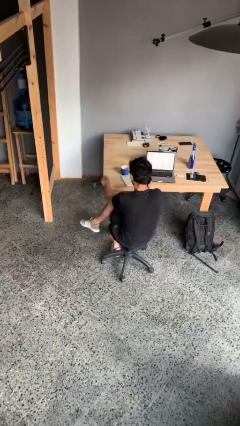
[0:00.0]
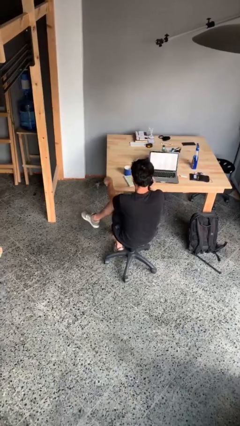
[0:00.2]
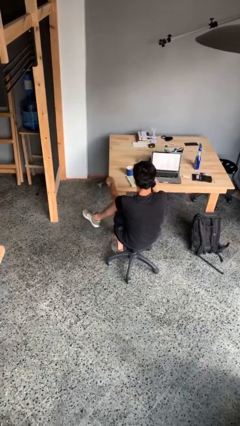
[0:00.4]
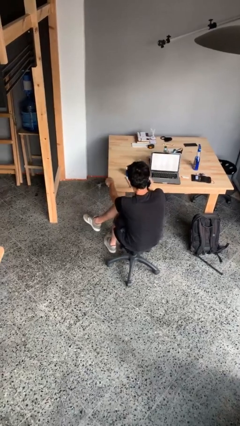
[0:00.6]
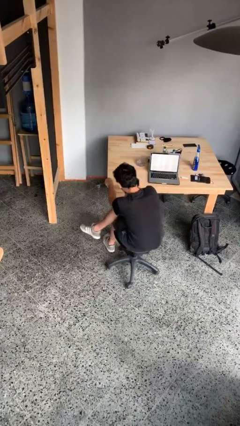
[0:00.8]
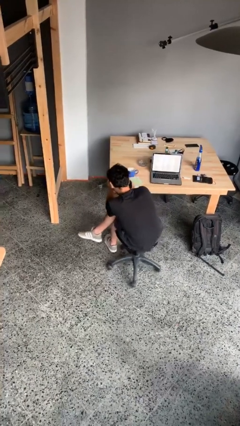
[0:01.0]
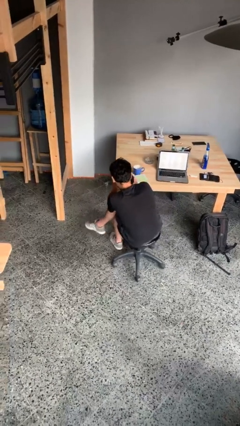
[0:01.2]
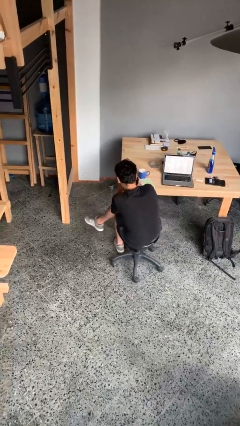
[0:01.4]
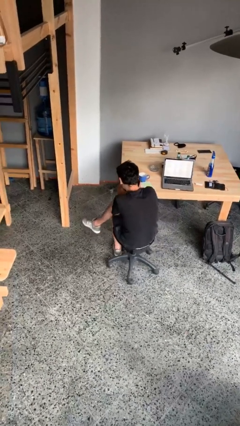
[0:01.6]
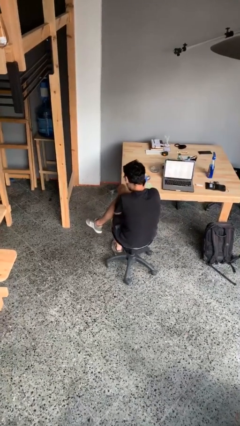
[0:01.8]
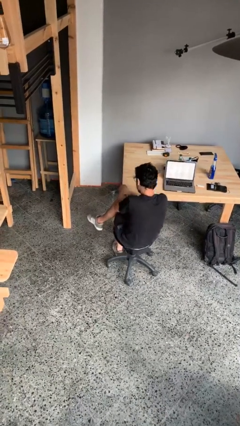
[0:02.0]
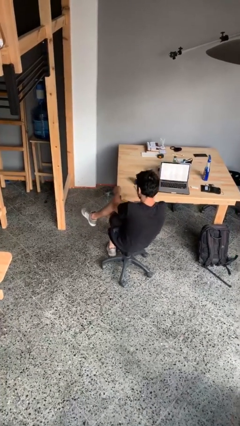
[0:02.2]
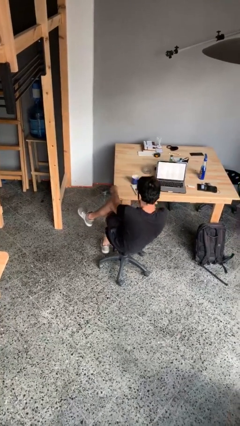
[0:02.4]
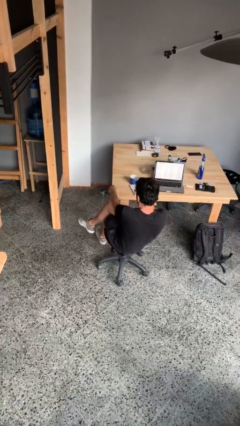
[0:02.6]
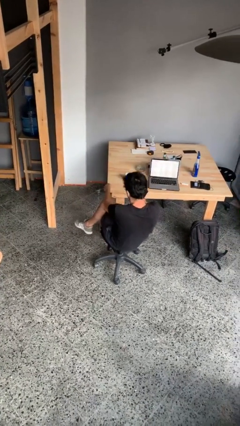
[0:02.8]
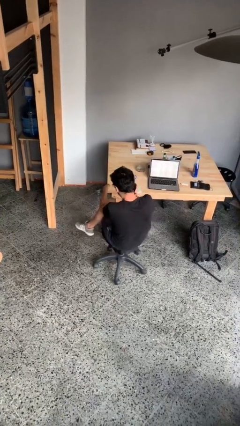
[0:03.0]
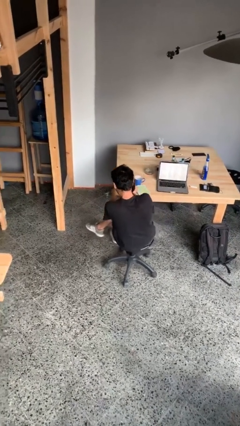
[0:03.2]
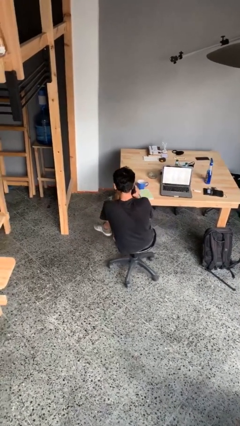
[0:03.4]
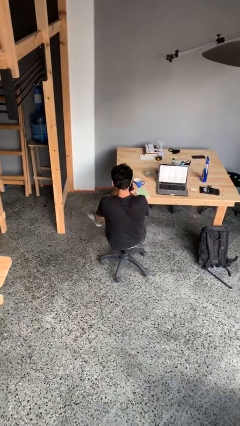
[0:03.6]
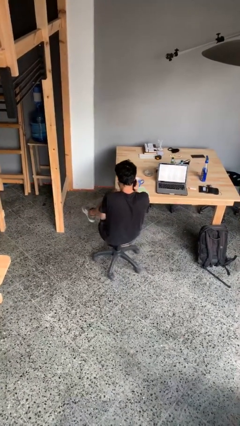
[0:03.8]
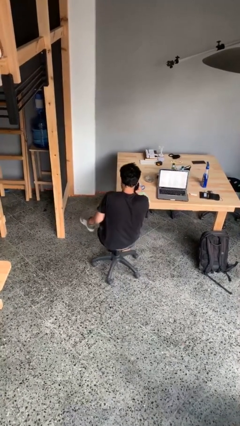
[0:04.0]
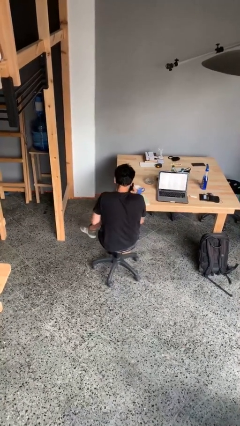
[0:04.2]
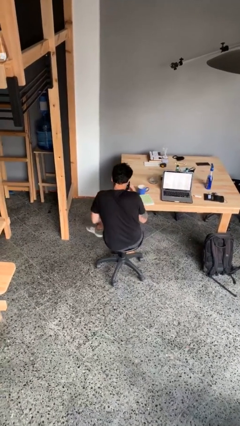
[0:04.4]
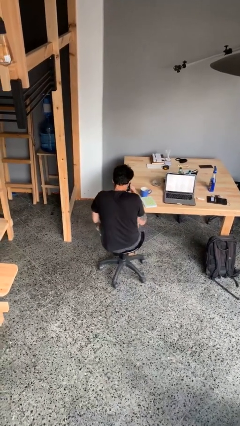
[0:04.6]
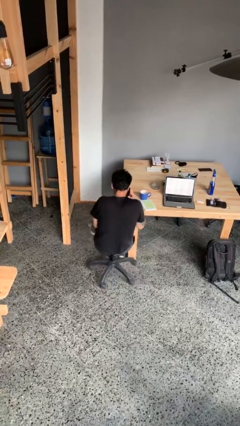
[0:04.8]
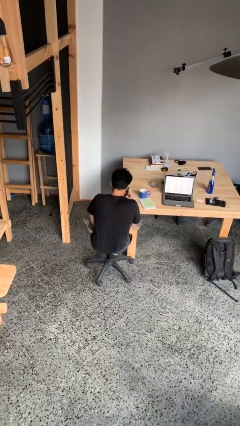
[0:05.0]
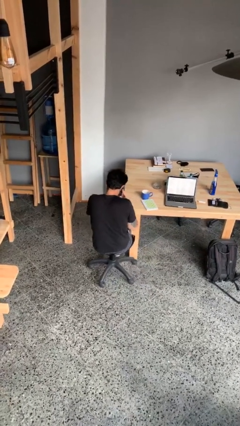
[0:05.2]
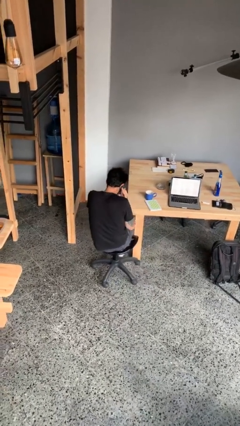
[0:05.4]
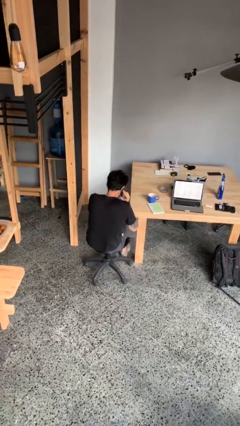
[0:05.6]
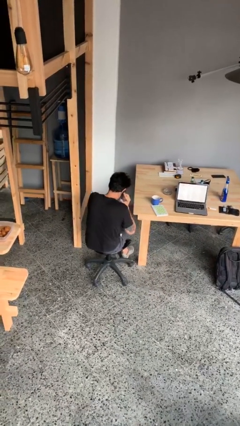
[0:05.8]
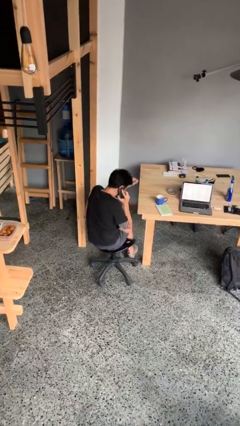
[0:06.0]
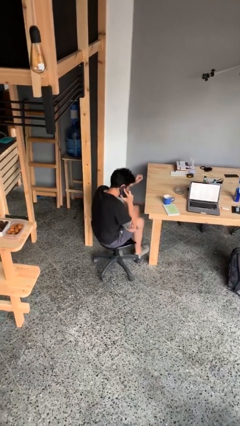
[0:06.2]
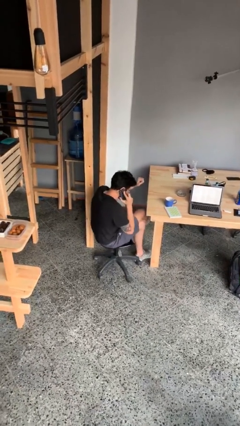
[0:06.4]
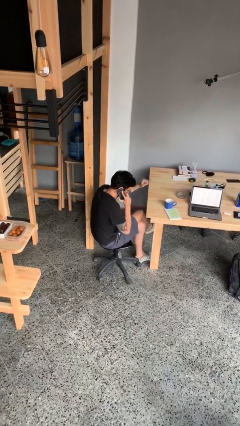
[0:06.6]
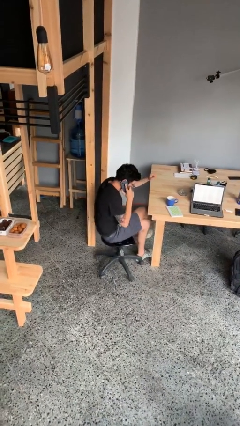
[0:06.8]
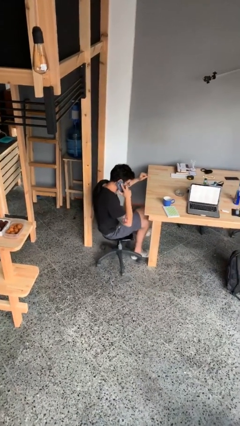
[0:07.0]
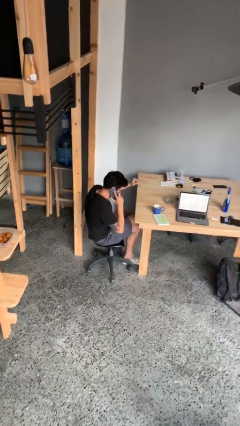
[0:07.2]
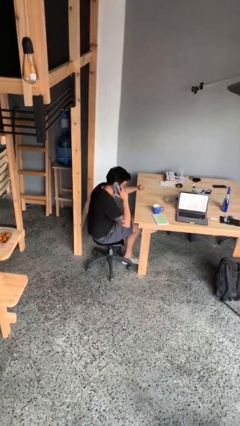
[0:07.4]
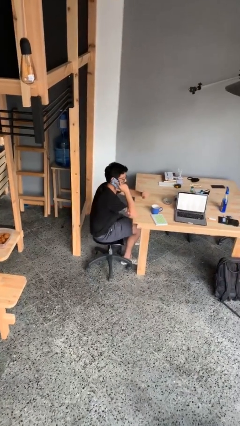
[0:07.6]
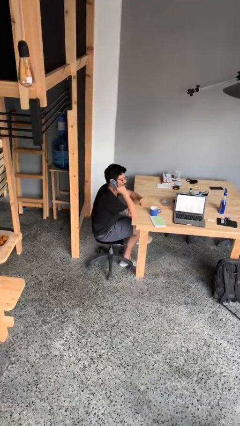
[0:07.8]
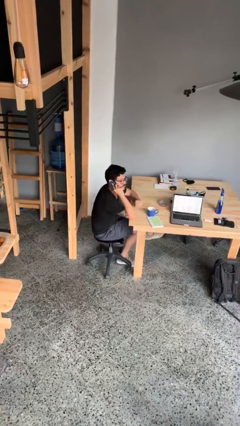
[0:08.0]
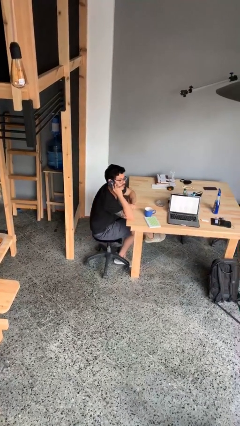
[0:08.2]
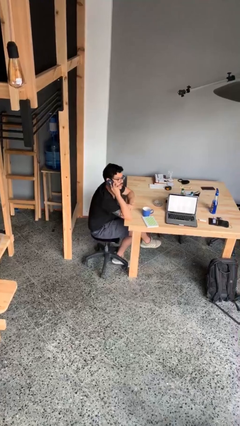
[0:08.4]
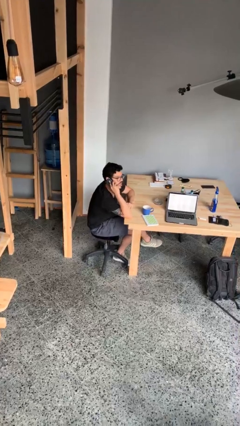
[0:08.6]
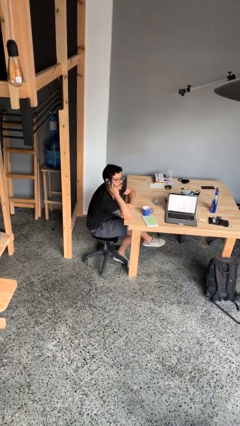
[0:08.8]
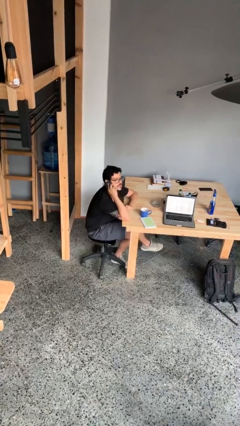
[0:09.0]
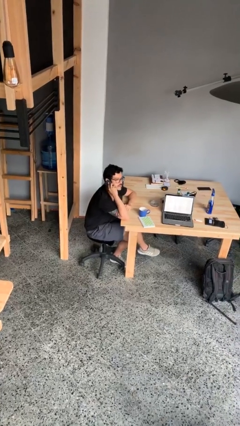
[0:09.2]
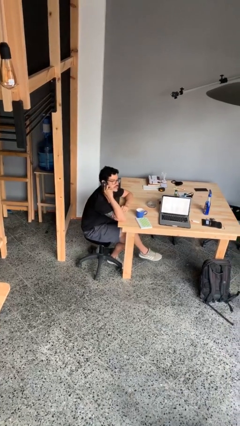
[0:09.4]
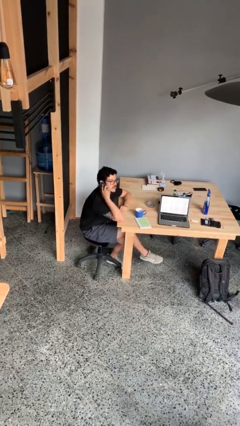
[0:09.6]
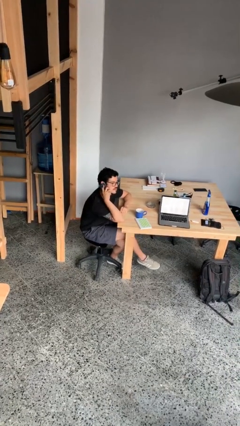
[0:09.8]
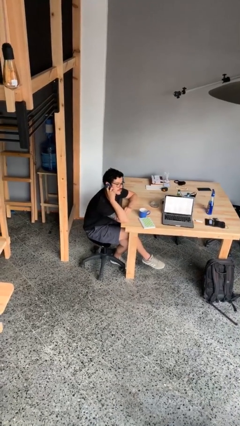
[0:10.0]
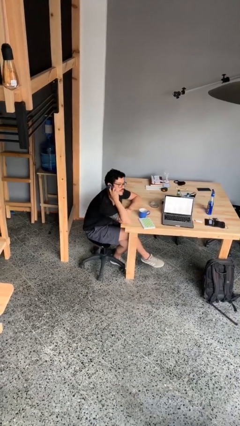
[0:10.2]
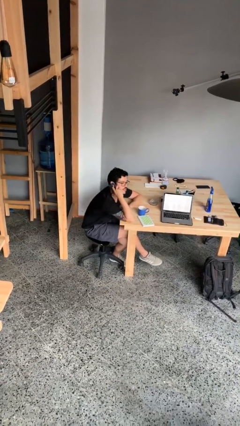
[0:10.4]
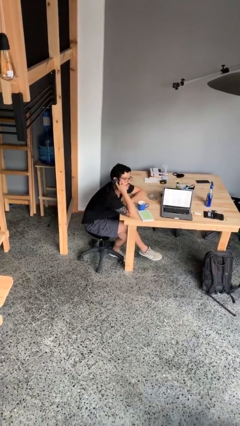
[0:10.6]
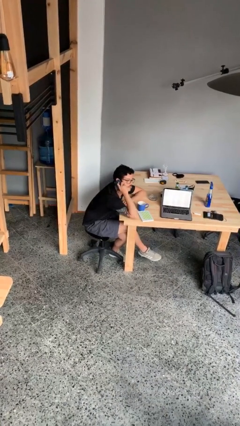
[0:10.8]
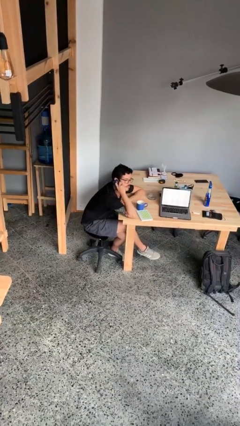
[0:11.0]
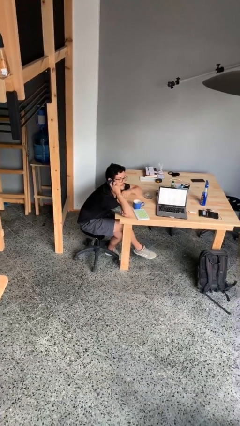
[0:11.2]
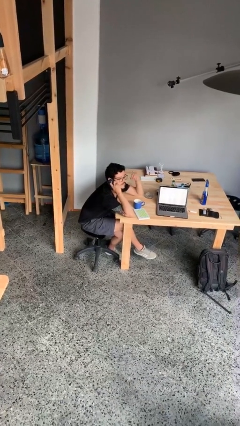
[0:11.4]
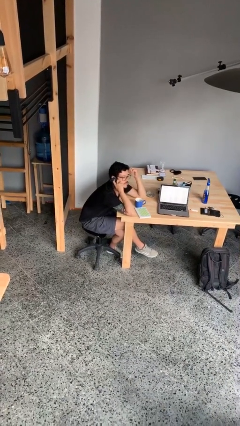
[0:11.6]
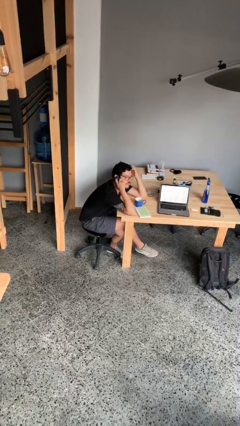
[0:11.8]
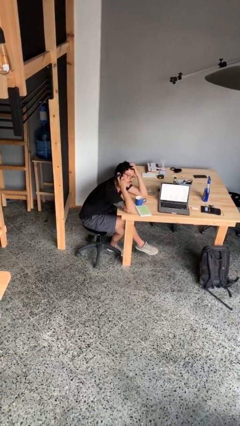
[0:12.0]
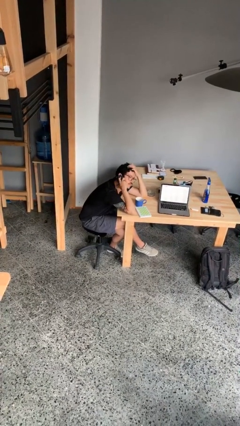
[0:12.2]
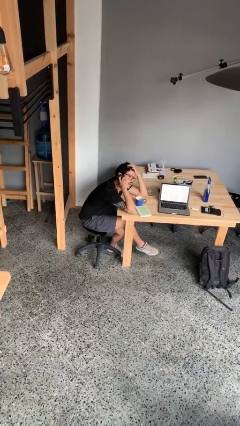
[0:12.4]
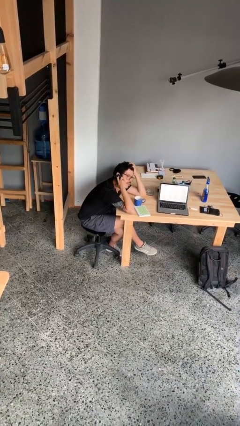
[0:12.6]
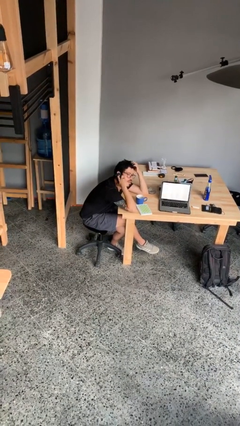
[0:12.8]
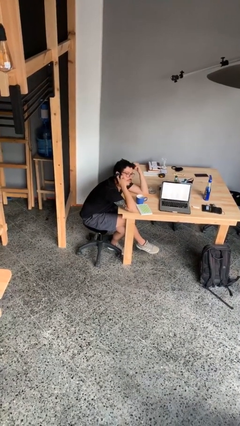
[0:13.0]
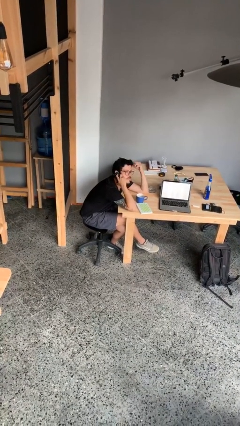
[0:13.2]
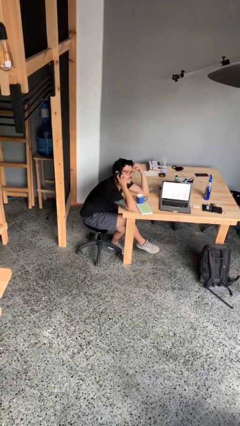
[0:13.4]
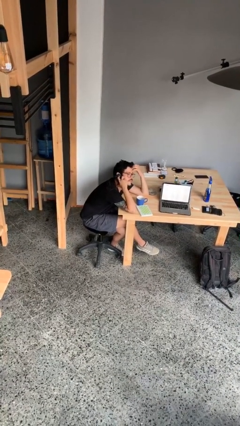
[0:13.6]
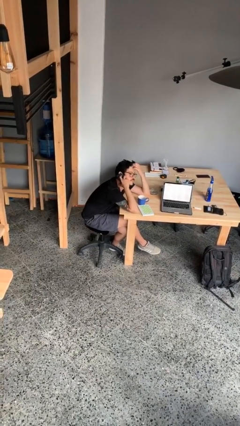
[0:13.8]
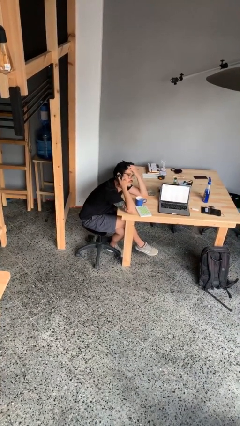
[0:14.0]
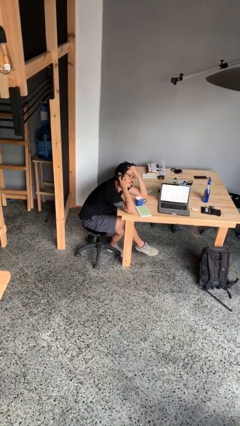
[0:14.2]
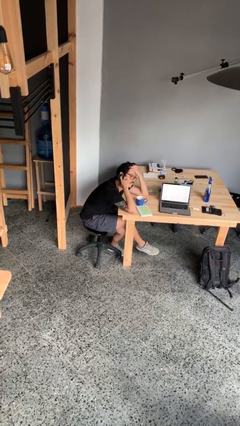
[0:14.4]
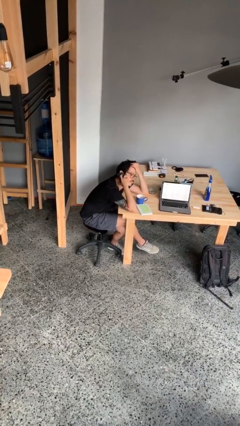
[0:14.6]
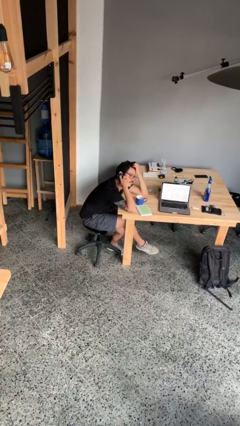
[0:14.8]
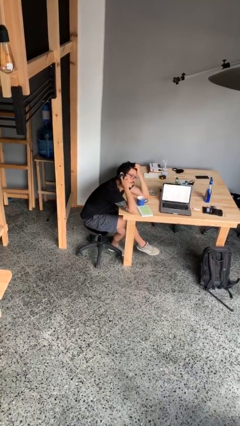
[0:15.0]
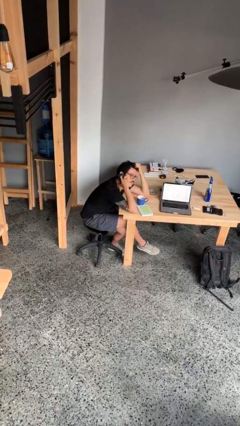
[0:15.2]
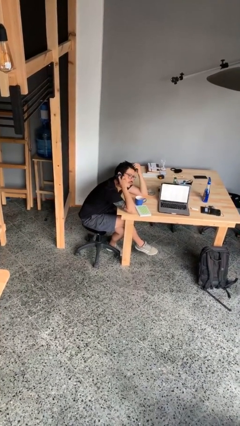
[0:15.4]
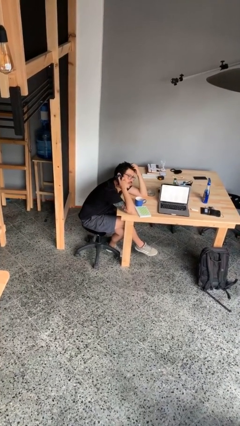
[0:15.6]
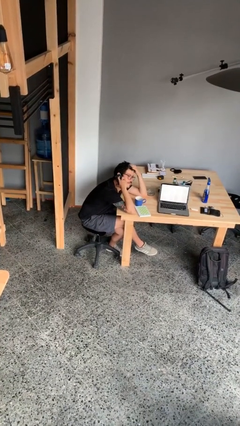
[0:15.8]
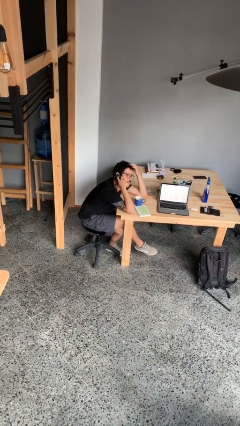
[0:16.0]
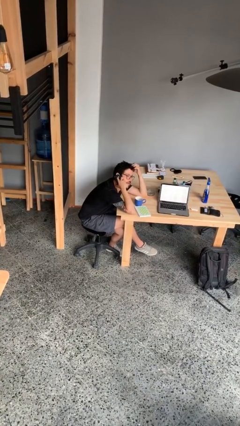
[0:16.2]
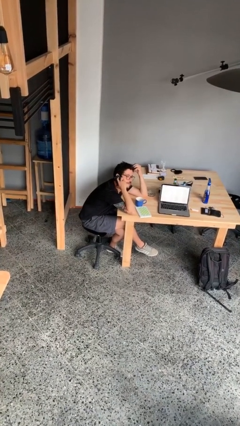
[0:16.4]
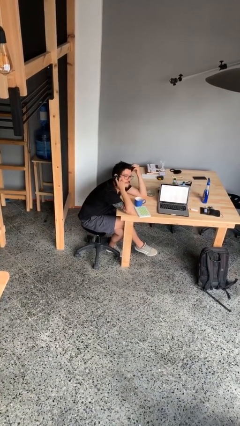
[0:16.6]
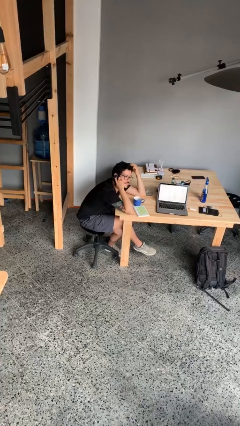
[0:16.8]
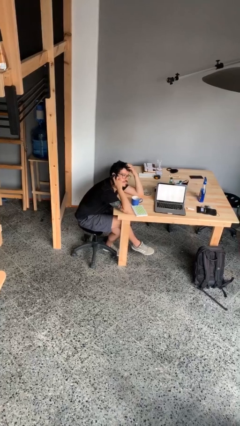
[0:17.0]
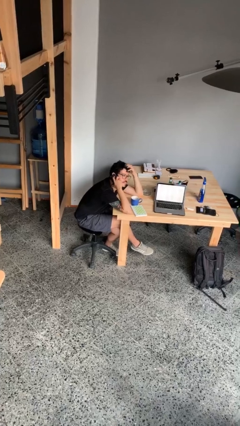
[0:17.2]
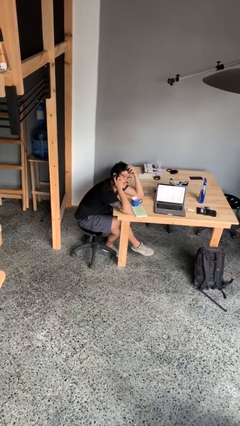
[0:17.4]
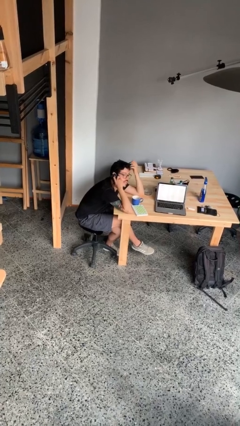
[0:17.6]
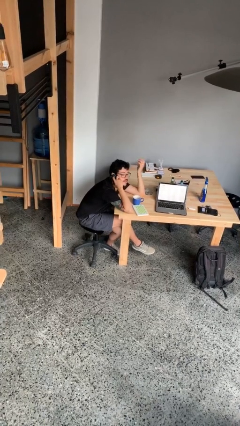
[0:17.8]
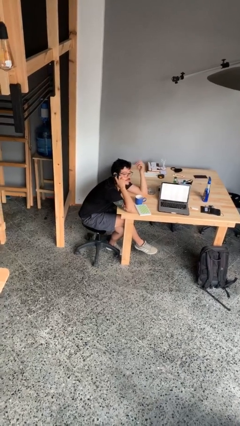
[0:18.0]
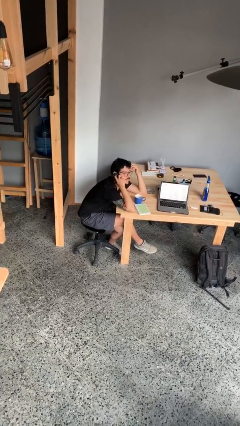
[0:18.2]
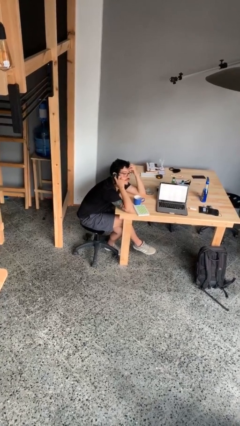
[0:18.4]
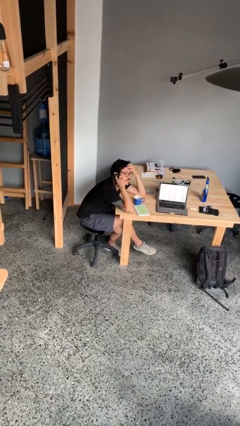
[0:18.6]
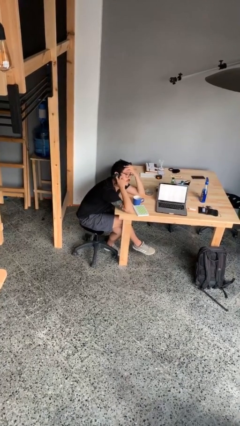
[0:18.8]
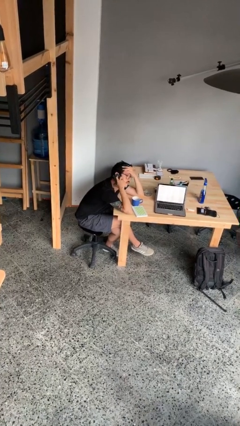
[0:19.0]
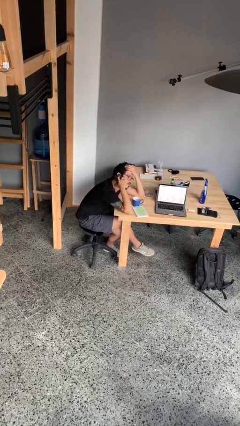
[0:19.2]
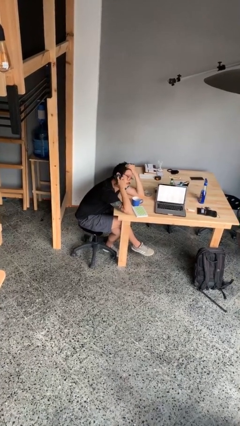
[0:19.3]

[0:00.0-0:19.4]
person talks on phone
